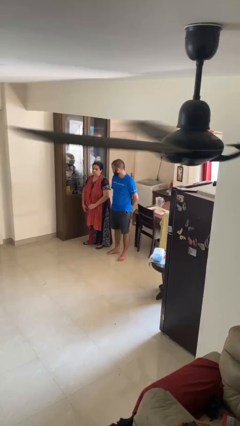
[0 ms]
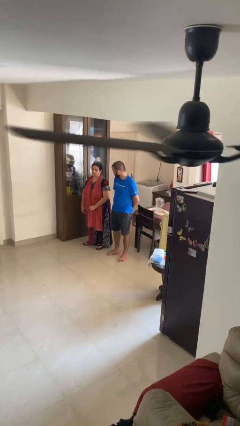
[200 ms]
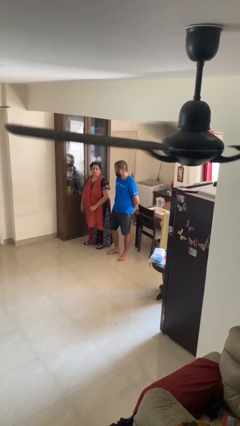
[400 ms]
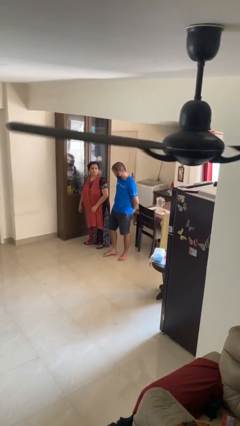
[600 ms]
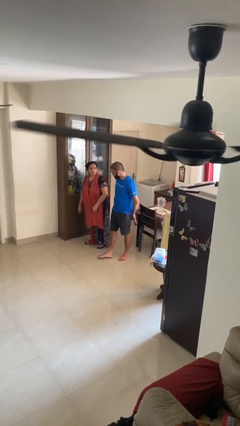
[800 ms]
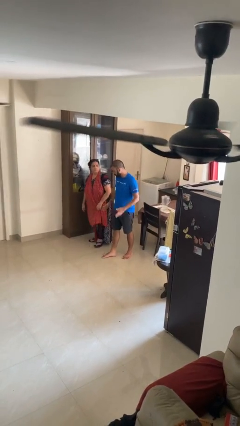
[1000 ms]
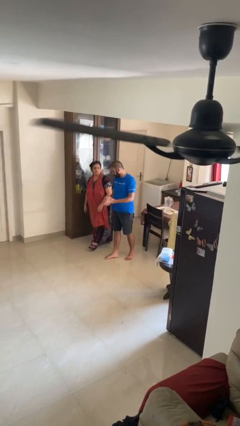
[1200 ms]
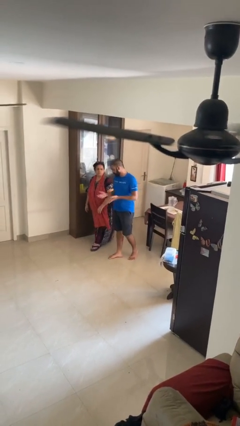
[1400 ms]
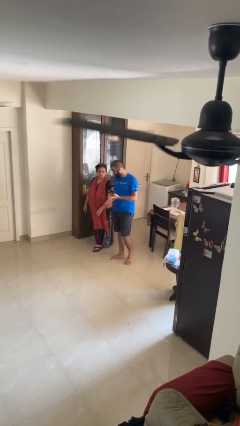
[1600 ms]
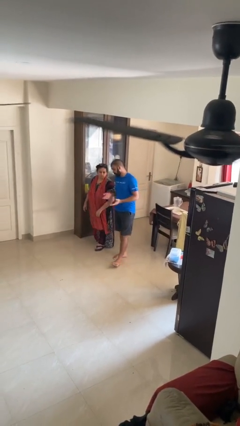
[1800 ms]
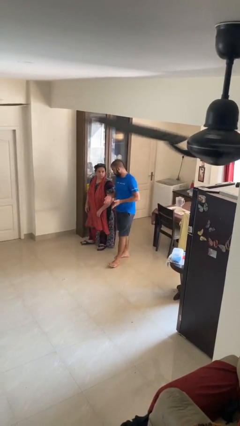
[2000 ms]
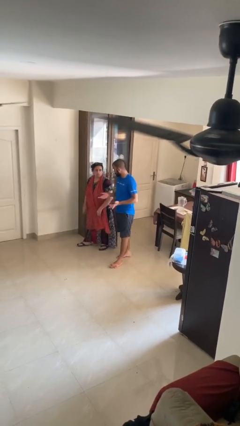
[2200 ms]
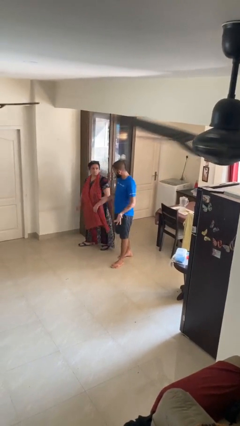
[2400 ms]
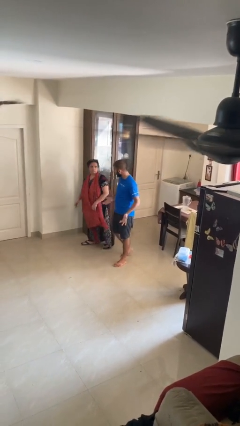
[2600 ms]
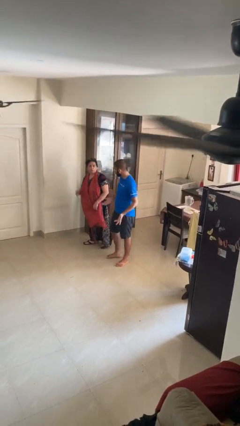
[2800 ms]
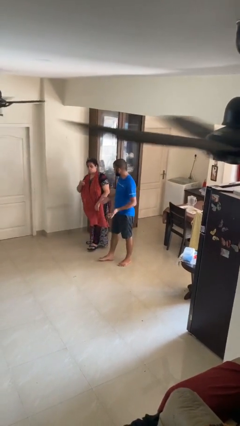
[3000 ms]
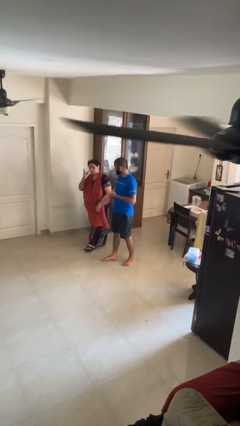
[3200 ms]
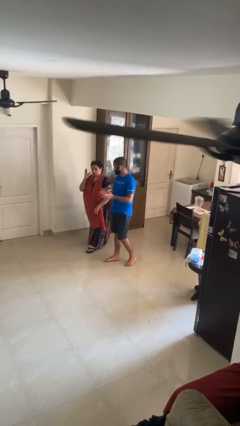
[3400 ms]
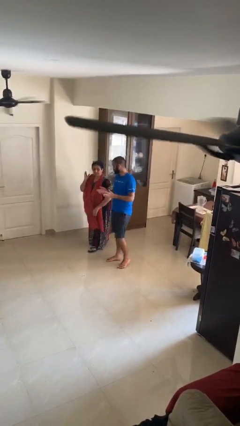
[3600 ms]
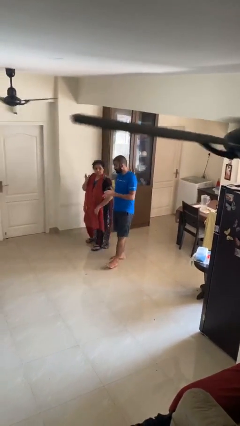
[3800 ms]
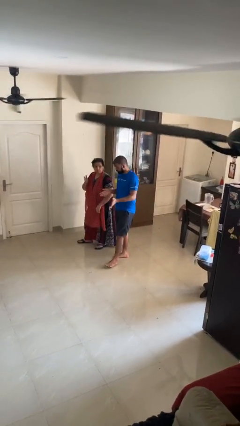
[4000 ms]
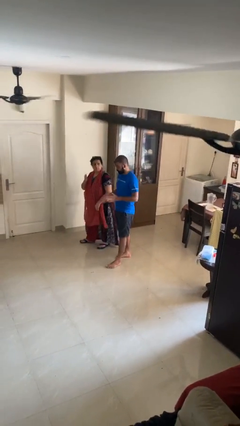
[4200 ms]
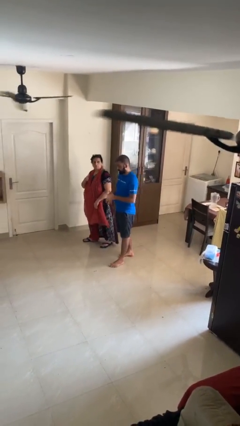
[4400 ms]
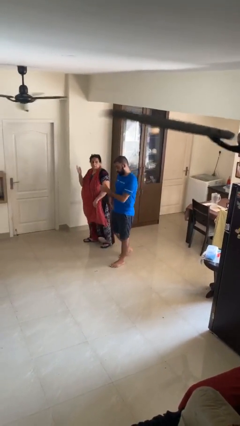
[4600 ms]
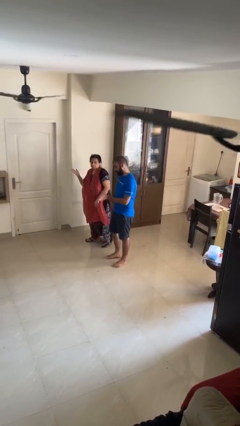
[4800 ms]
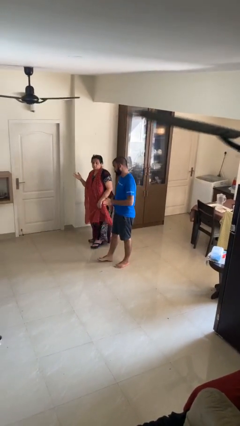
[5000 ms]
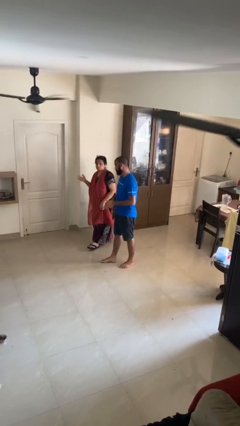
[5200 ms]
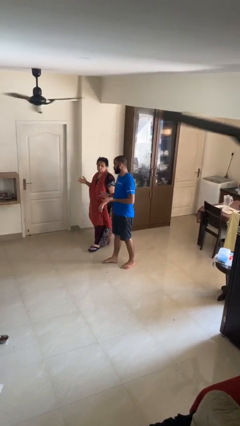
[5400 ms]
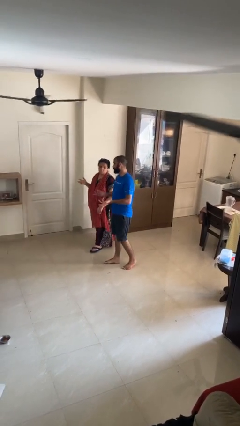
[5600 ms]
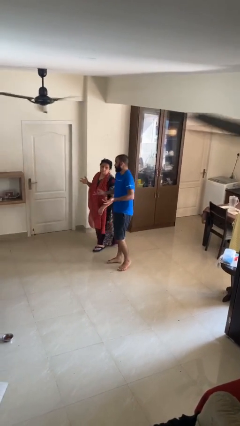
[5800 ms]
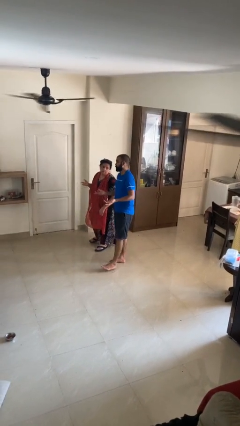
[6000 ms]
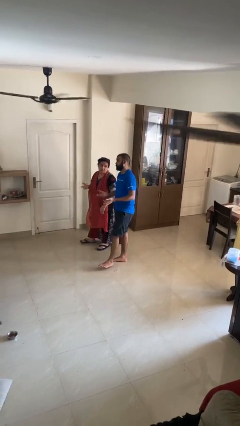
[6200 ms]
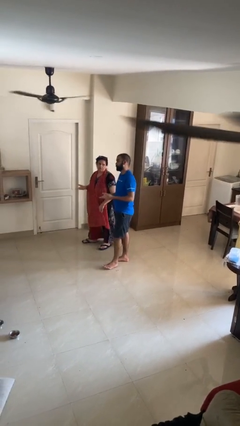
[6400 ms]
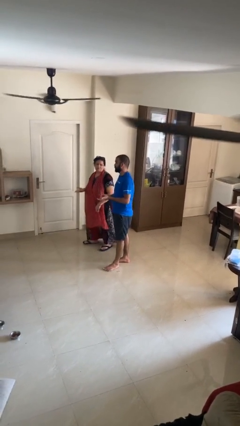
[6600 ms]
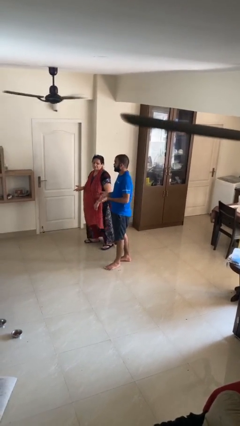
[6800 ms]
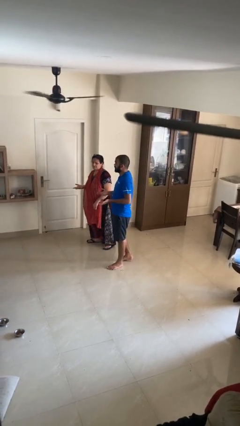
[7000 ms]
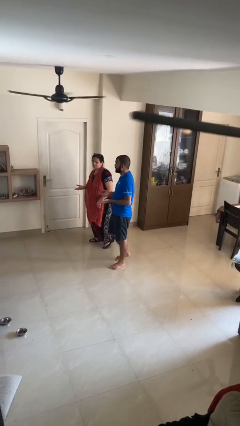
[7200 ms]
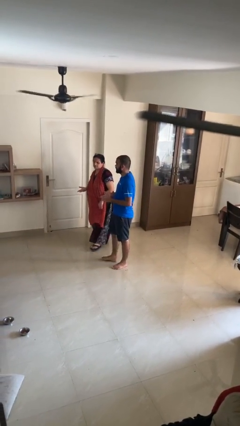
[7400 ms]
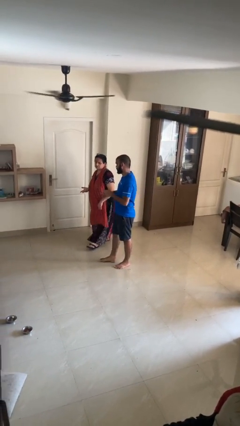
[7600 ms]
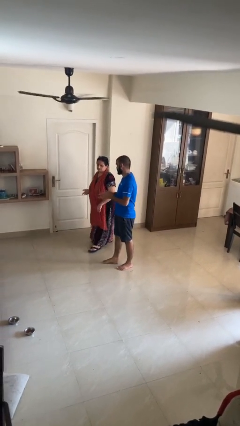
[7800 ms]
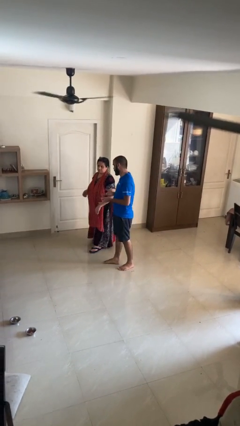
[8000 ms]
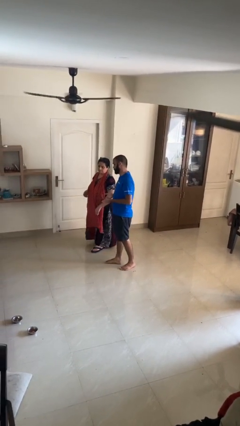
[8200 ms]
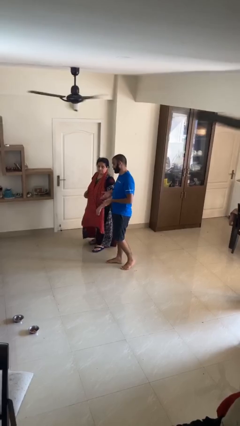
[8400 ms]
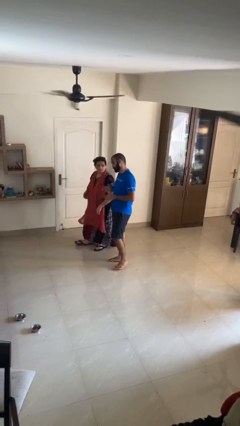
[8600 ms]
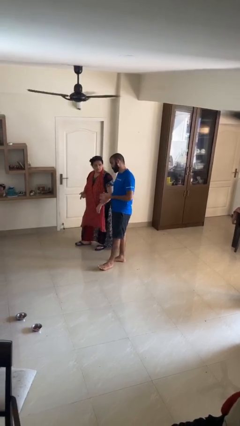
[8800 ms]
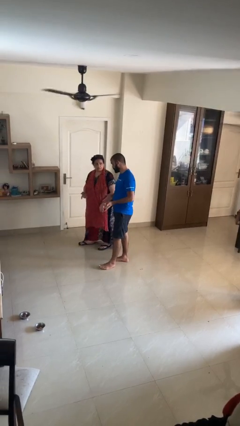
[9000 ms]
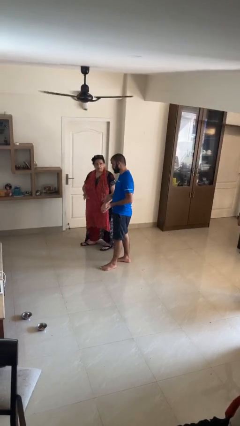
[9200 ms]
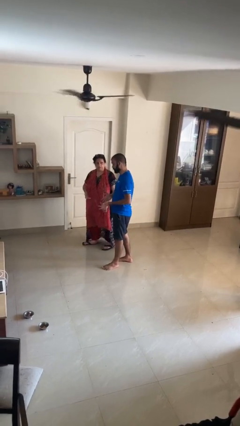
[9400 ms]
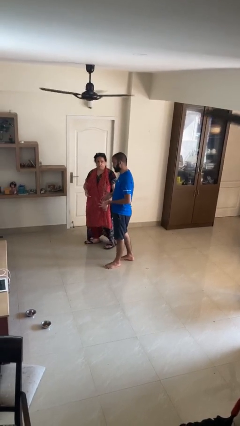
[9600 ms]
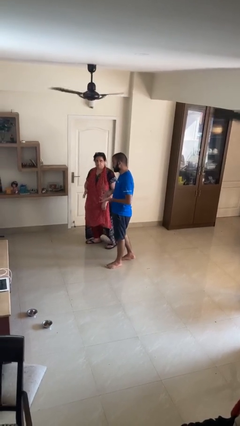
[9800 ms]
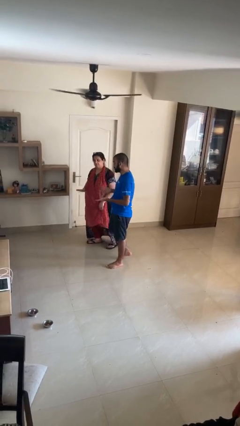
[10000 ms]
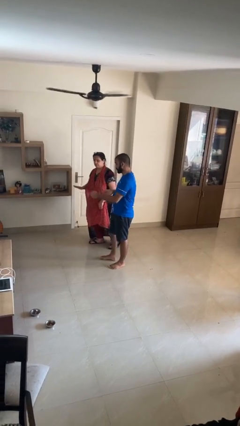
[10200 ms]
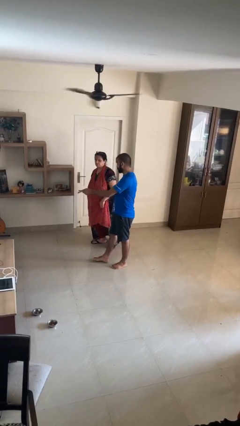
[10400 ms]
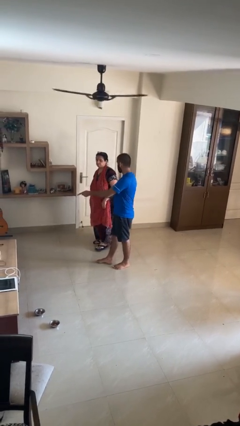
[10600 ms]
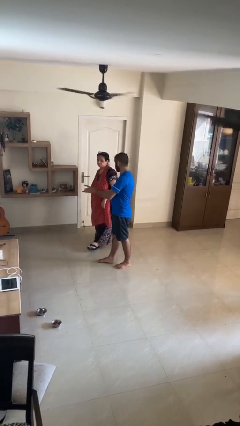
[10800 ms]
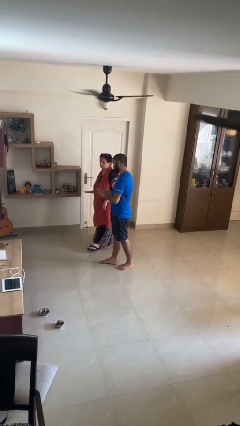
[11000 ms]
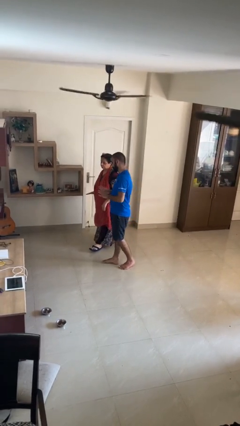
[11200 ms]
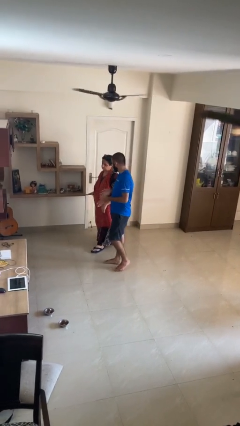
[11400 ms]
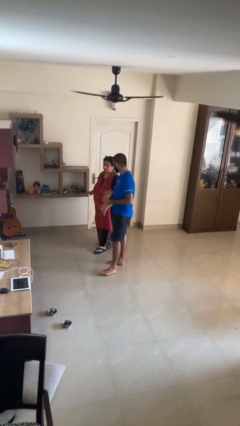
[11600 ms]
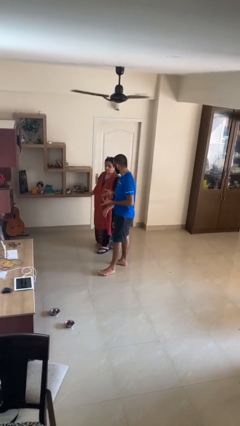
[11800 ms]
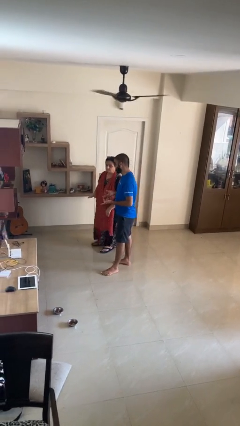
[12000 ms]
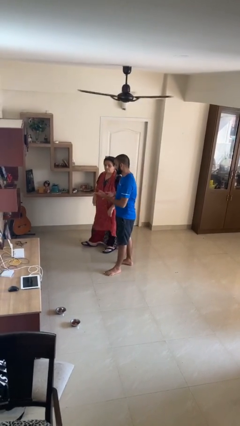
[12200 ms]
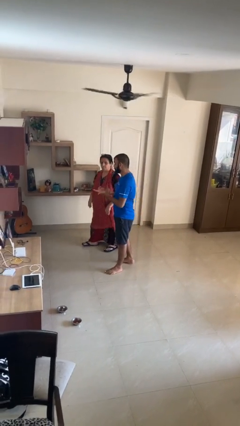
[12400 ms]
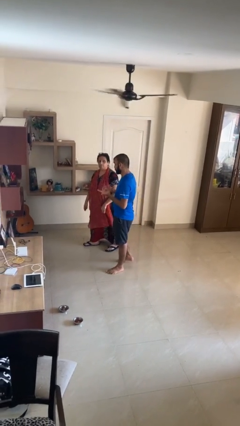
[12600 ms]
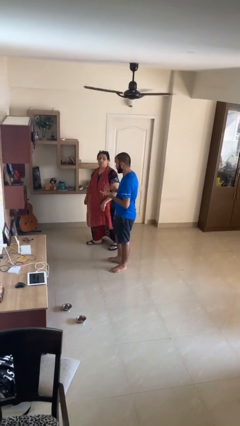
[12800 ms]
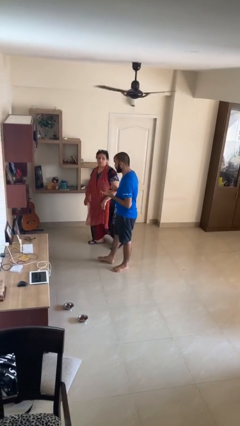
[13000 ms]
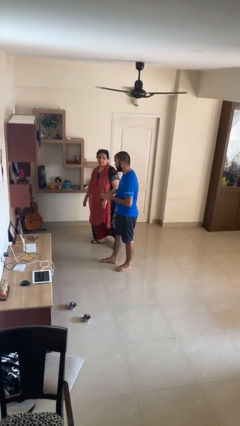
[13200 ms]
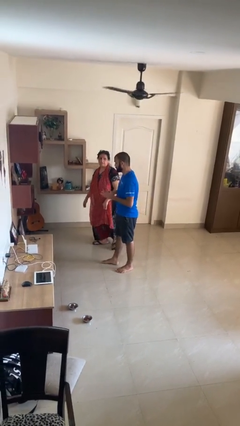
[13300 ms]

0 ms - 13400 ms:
person talks to person

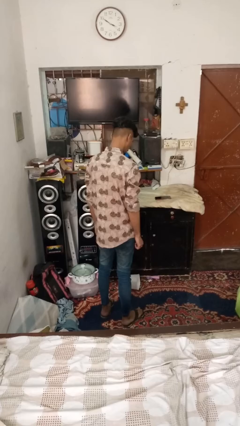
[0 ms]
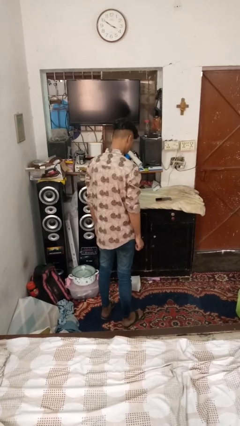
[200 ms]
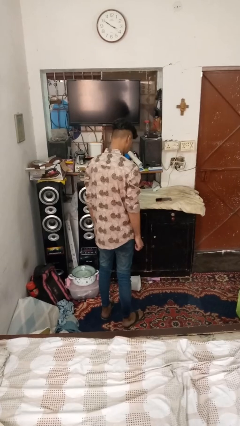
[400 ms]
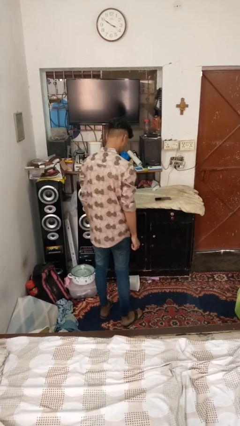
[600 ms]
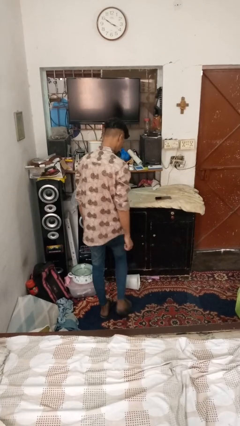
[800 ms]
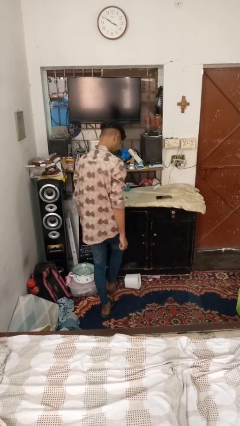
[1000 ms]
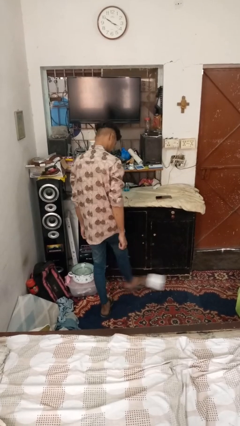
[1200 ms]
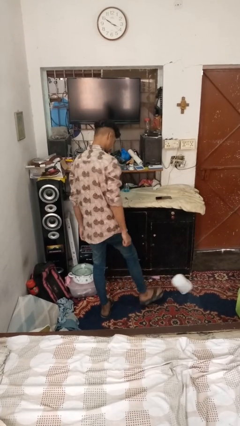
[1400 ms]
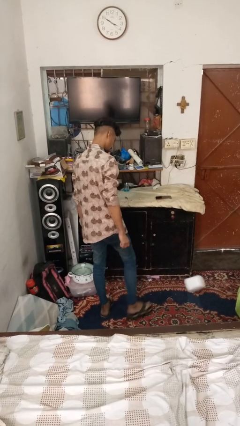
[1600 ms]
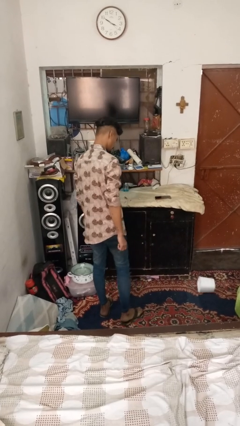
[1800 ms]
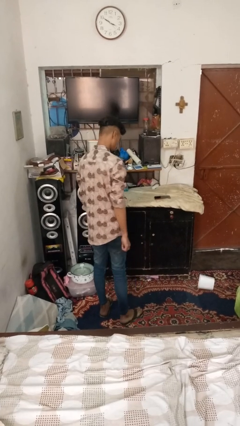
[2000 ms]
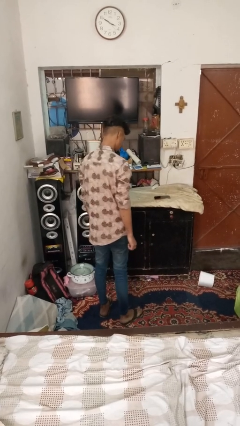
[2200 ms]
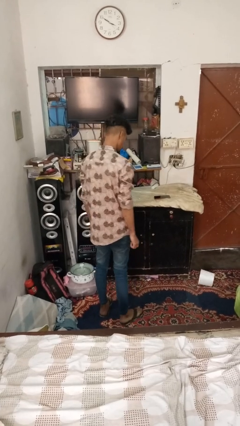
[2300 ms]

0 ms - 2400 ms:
person kicks object to person

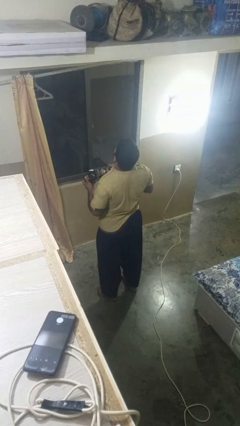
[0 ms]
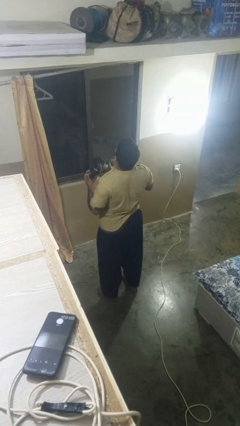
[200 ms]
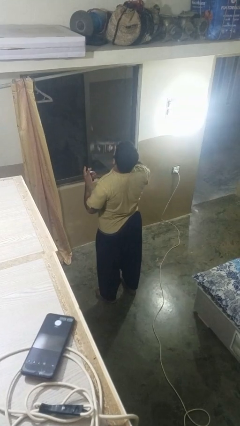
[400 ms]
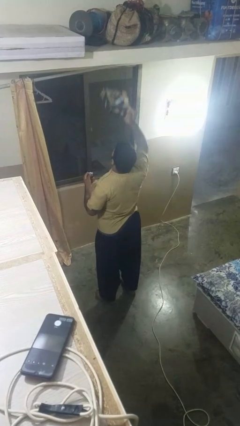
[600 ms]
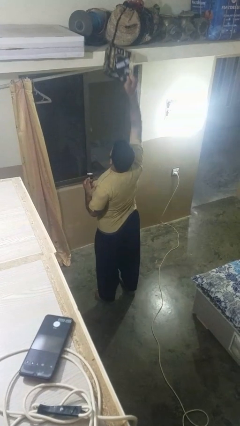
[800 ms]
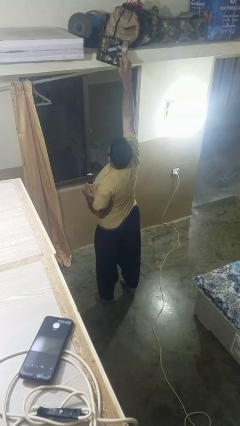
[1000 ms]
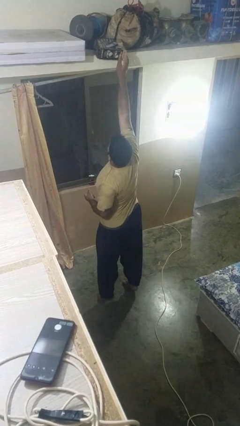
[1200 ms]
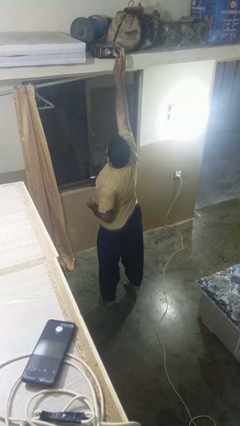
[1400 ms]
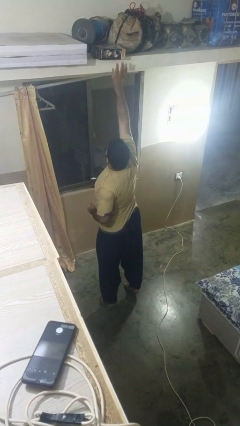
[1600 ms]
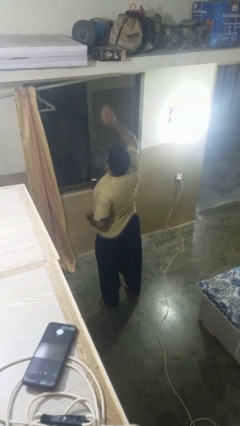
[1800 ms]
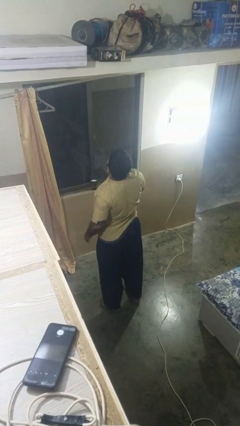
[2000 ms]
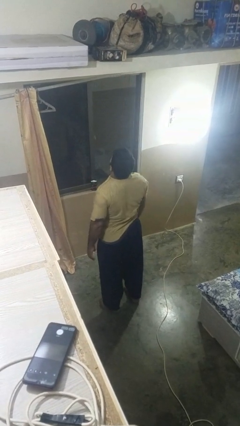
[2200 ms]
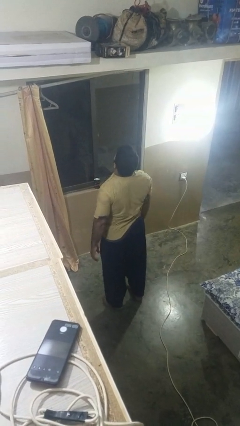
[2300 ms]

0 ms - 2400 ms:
person puts down object on shelf
